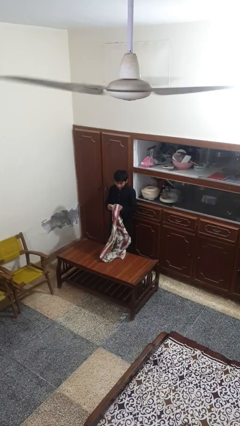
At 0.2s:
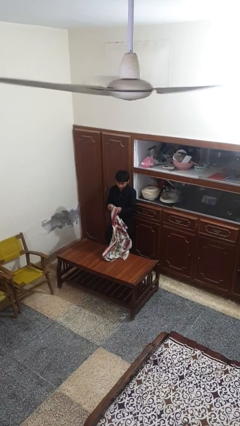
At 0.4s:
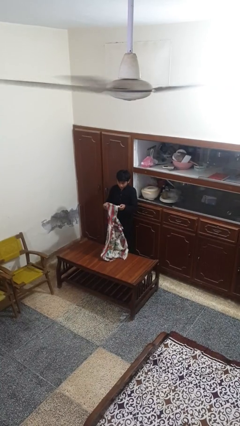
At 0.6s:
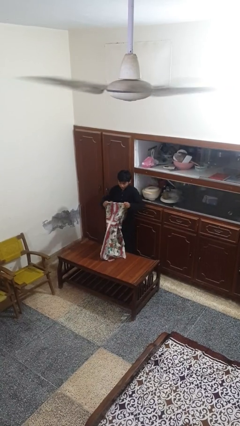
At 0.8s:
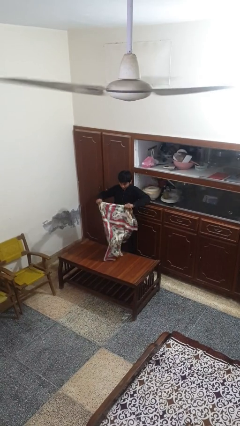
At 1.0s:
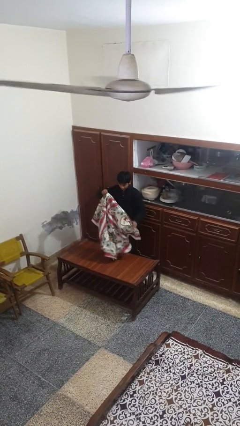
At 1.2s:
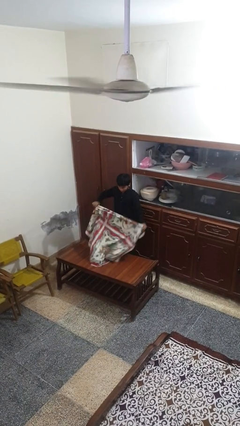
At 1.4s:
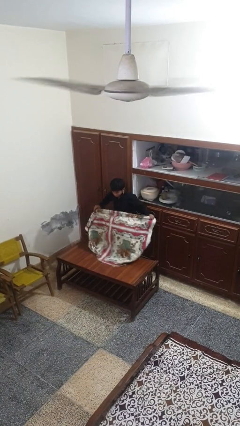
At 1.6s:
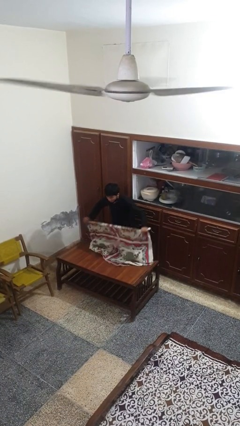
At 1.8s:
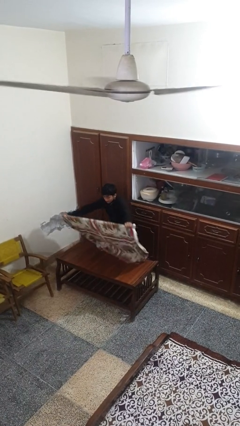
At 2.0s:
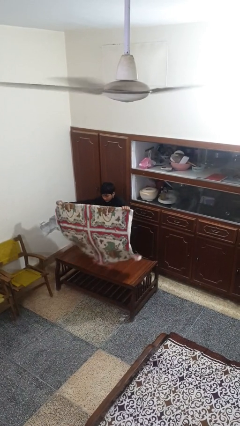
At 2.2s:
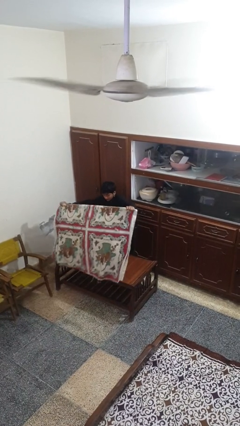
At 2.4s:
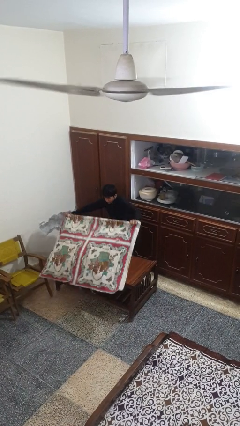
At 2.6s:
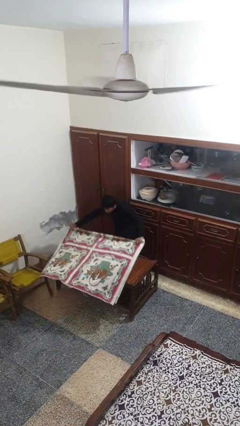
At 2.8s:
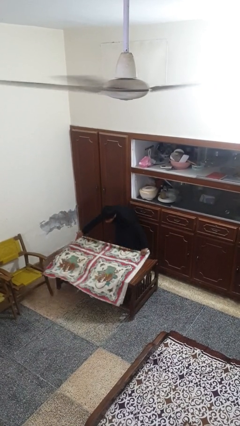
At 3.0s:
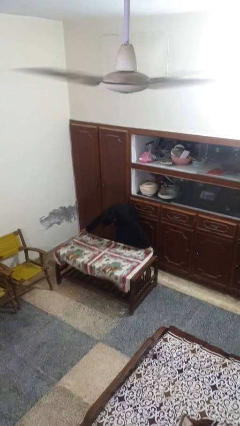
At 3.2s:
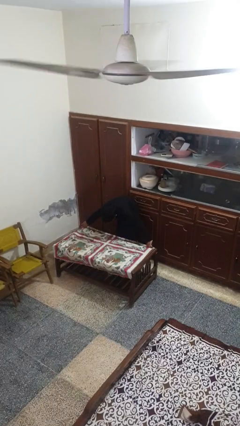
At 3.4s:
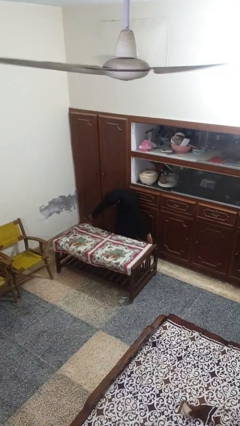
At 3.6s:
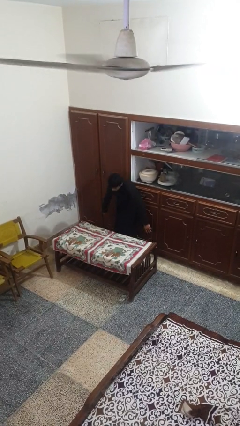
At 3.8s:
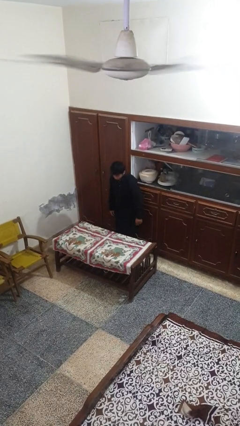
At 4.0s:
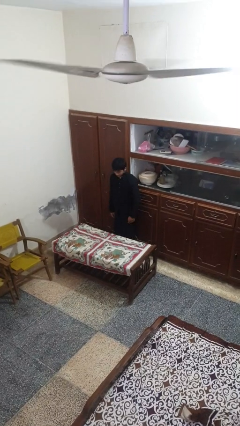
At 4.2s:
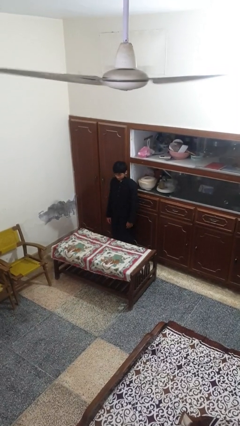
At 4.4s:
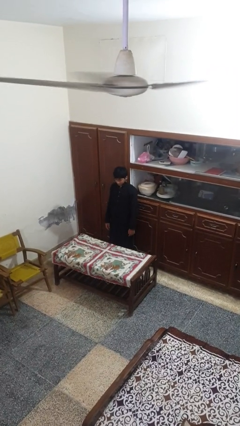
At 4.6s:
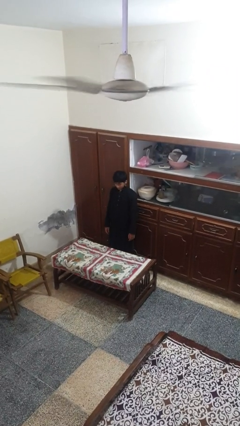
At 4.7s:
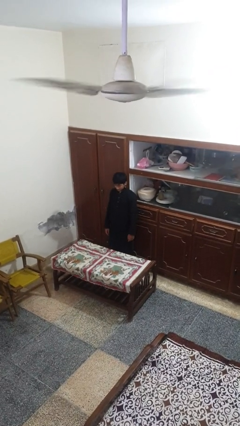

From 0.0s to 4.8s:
person spreads tablecloth

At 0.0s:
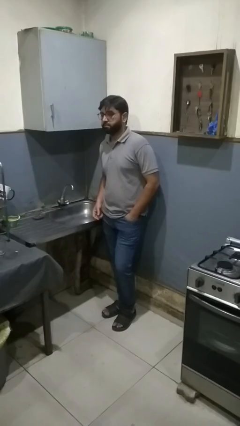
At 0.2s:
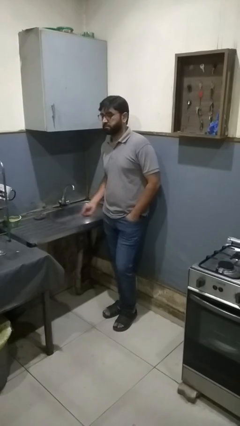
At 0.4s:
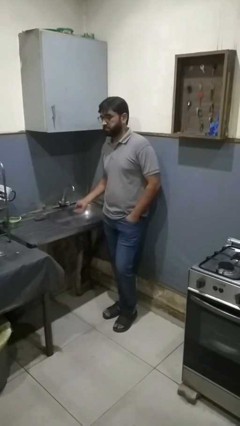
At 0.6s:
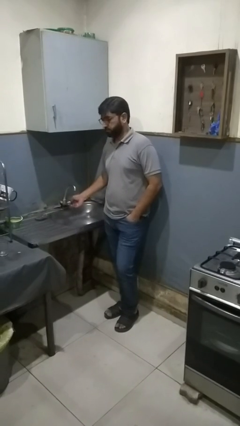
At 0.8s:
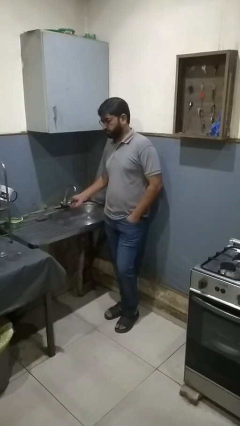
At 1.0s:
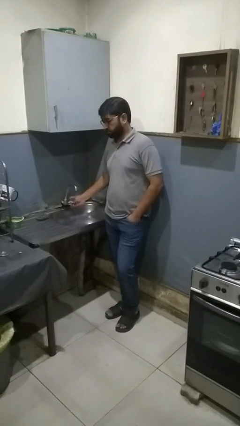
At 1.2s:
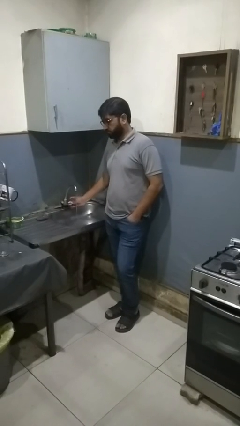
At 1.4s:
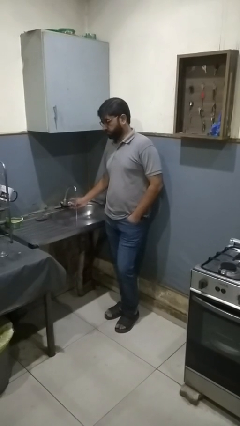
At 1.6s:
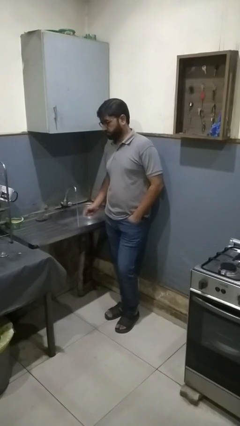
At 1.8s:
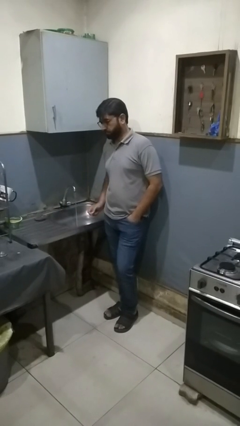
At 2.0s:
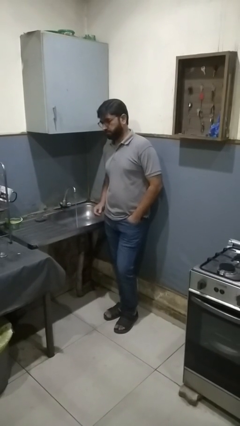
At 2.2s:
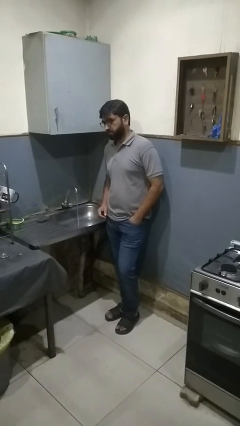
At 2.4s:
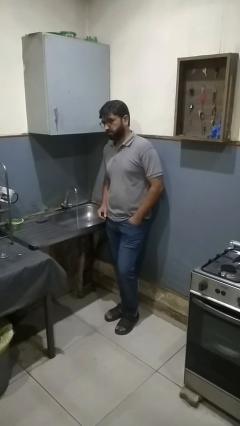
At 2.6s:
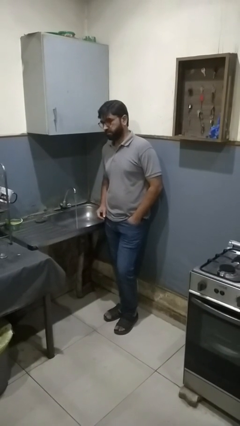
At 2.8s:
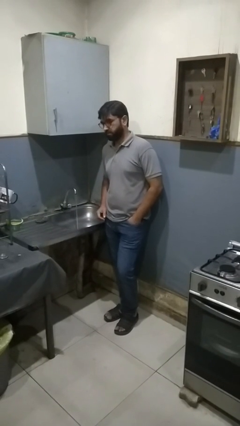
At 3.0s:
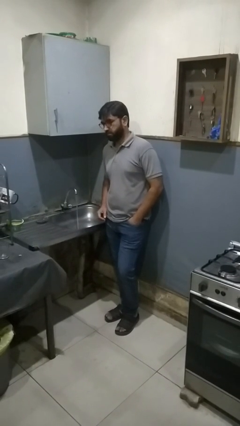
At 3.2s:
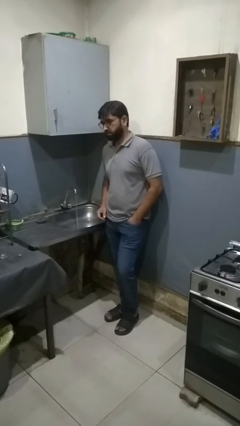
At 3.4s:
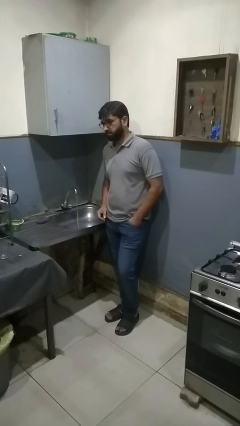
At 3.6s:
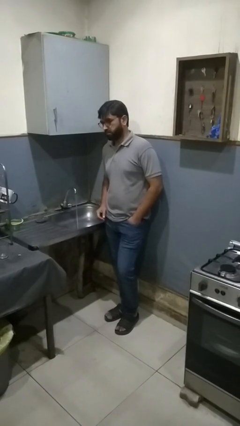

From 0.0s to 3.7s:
person turns on faucet

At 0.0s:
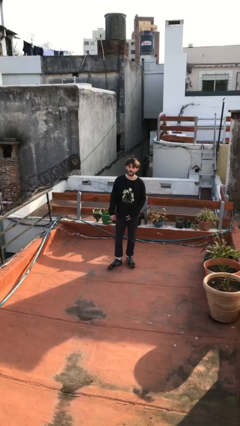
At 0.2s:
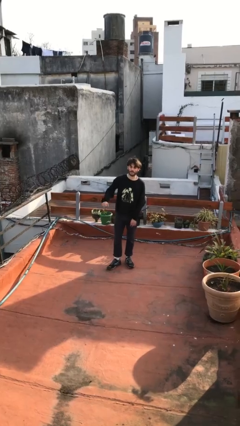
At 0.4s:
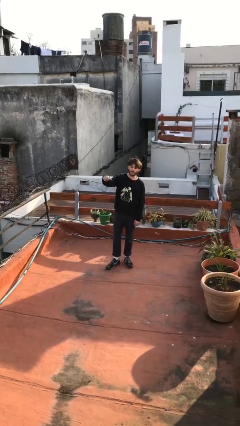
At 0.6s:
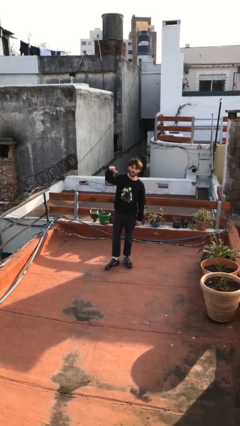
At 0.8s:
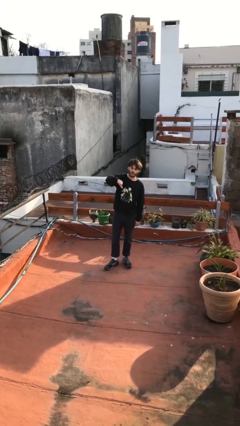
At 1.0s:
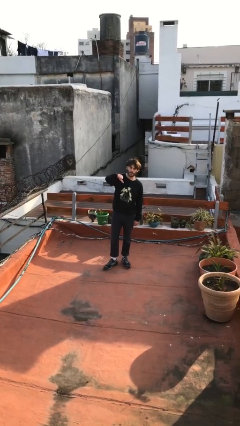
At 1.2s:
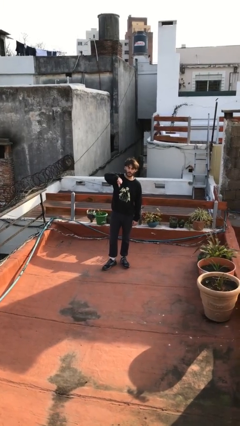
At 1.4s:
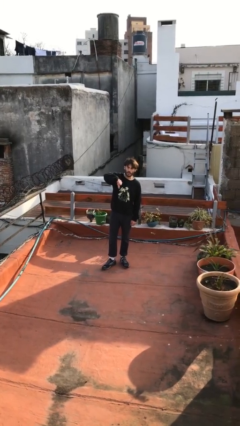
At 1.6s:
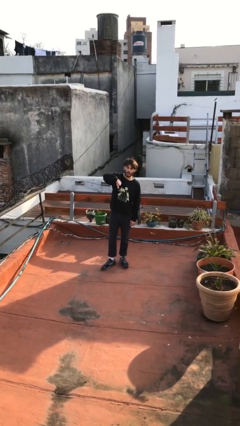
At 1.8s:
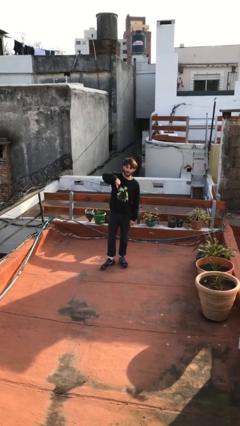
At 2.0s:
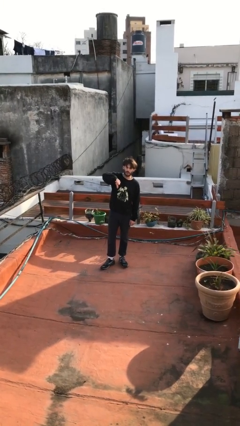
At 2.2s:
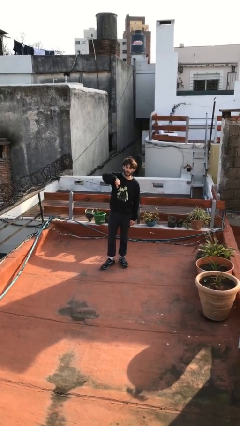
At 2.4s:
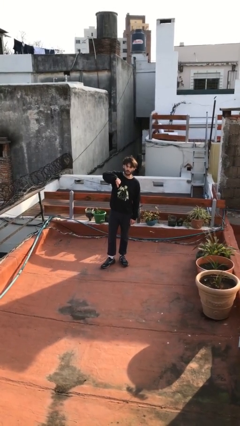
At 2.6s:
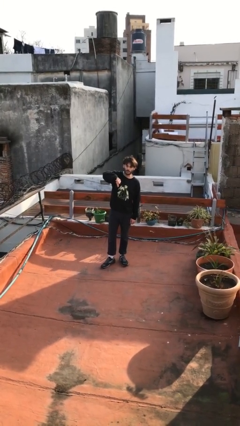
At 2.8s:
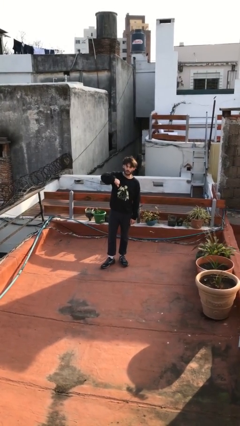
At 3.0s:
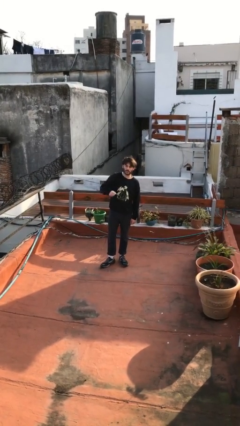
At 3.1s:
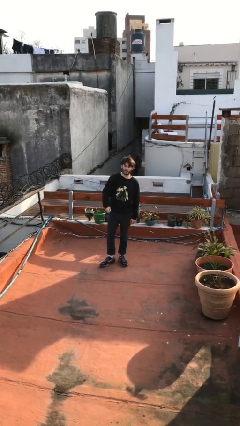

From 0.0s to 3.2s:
person gestures thumbs down

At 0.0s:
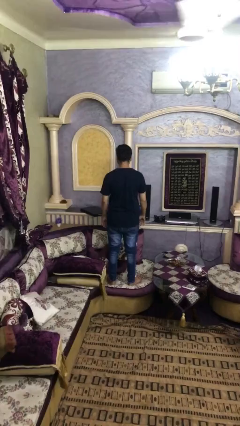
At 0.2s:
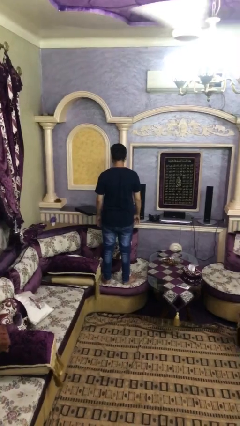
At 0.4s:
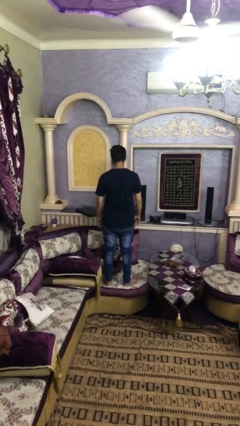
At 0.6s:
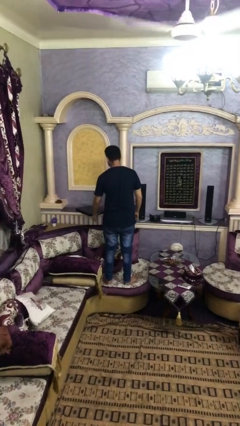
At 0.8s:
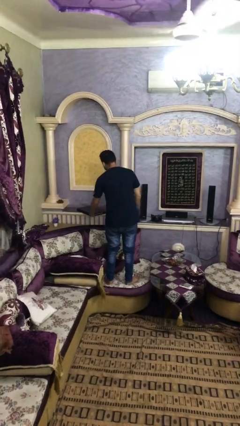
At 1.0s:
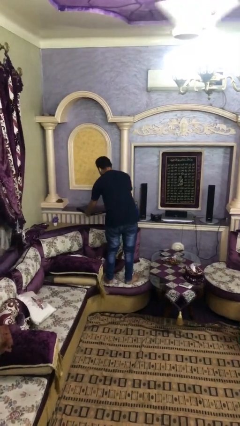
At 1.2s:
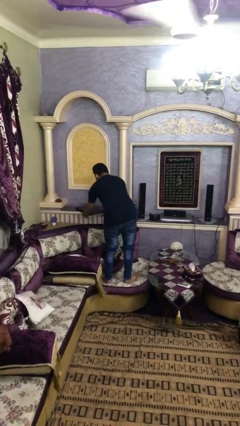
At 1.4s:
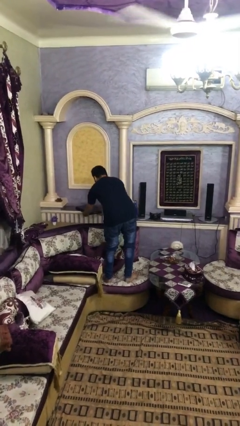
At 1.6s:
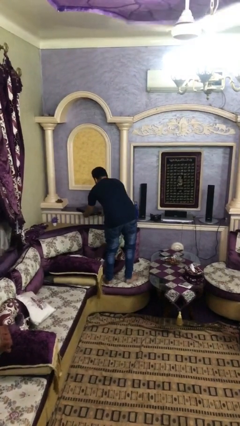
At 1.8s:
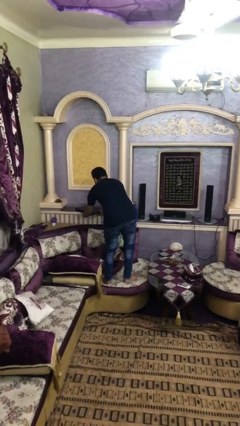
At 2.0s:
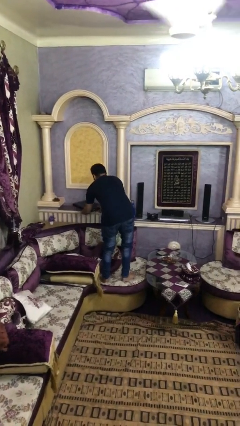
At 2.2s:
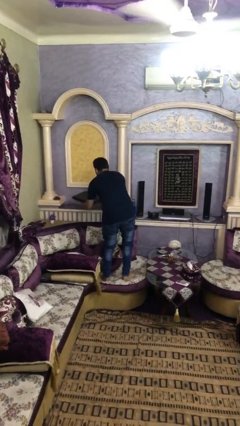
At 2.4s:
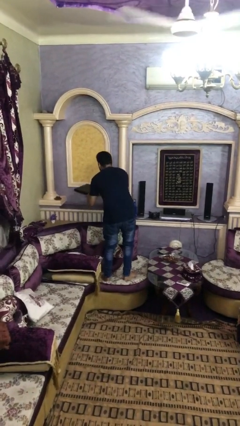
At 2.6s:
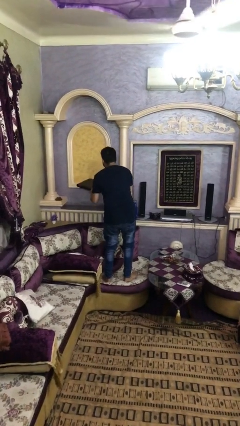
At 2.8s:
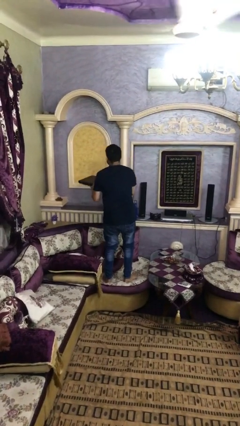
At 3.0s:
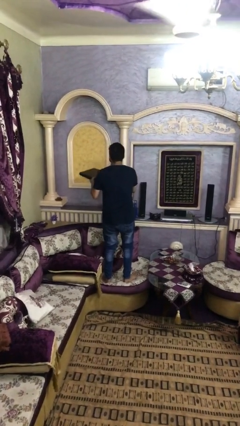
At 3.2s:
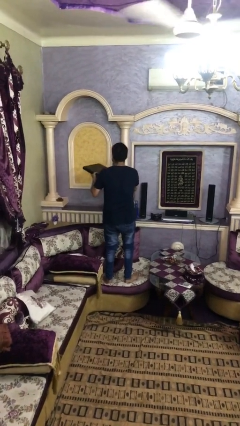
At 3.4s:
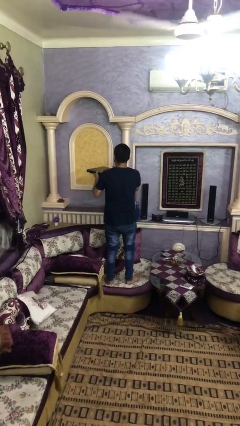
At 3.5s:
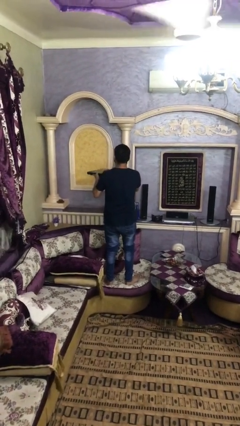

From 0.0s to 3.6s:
person picks up object from table

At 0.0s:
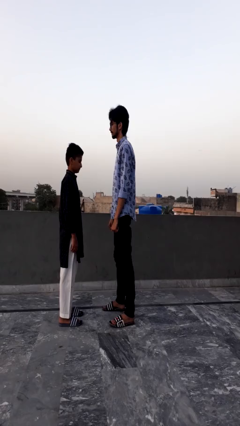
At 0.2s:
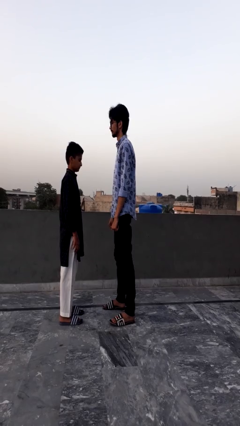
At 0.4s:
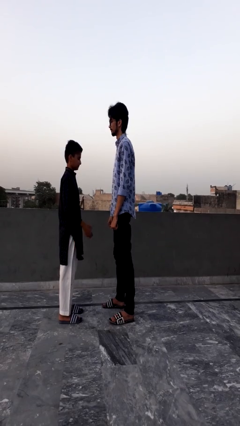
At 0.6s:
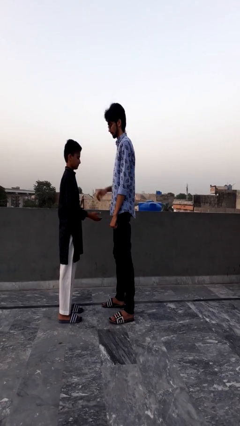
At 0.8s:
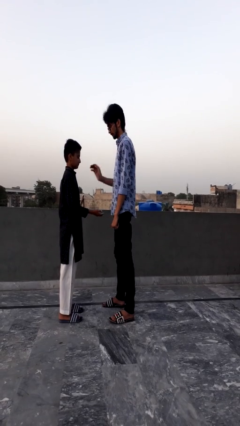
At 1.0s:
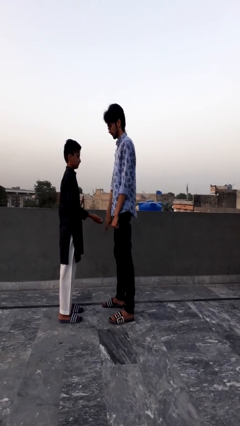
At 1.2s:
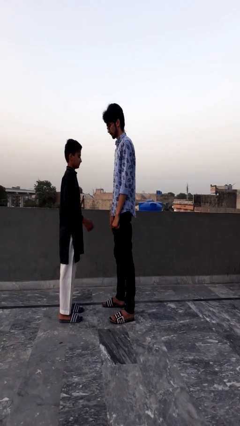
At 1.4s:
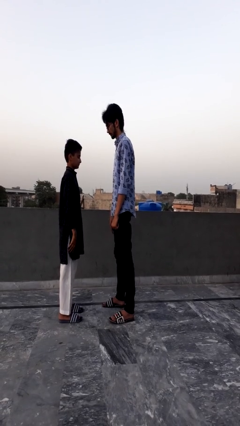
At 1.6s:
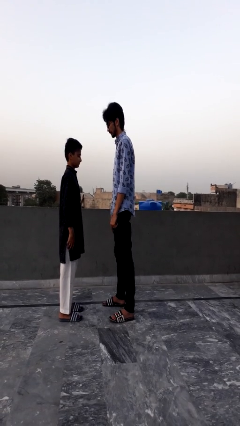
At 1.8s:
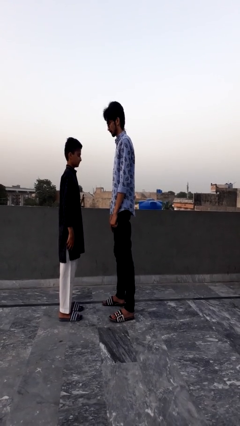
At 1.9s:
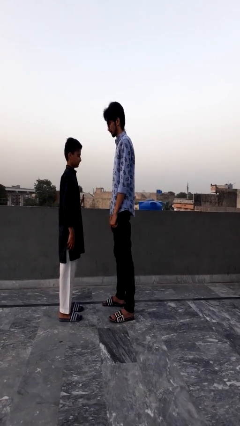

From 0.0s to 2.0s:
person highfives hand

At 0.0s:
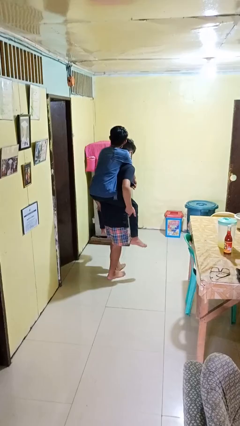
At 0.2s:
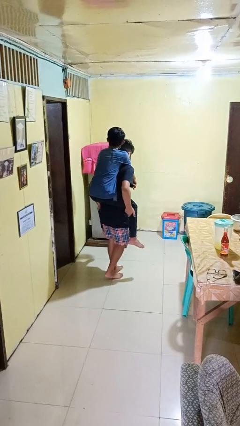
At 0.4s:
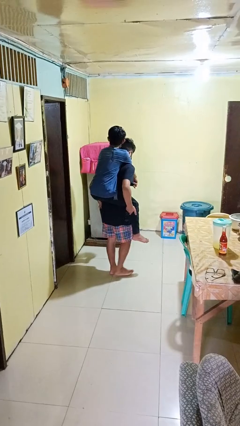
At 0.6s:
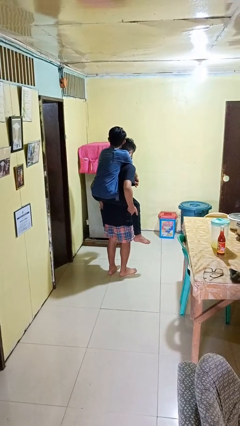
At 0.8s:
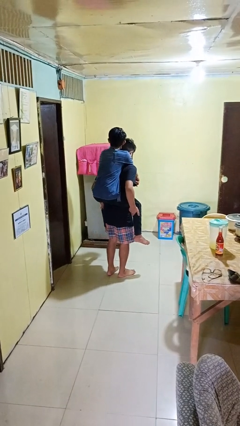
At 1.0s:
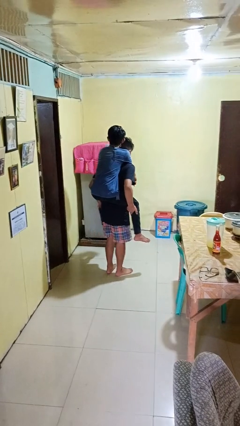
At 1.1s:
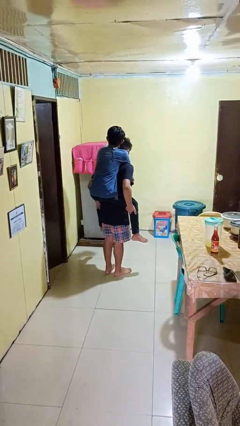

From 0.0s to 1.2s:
person carries person on back
